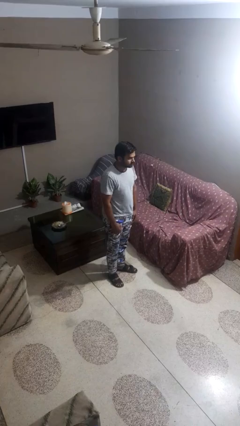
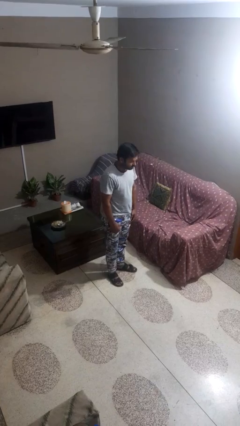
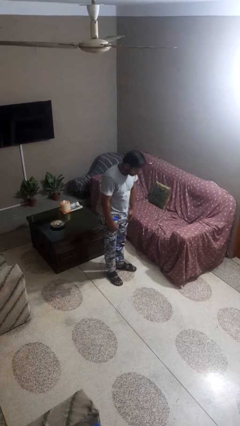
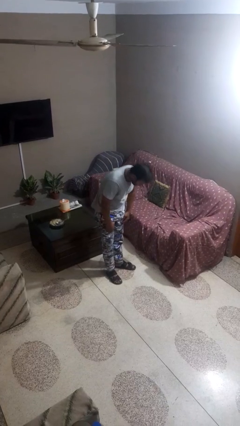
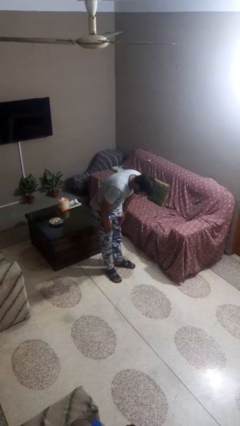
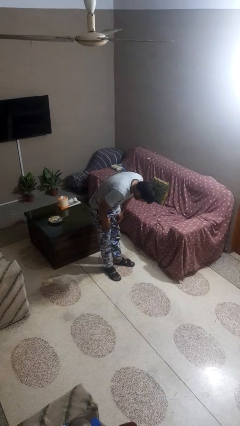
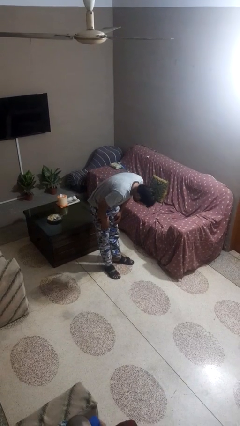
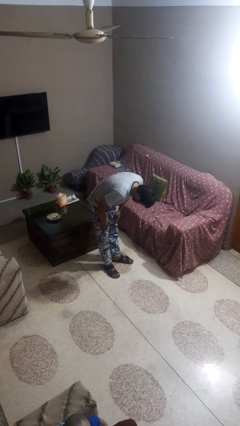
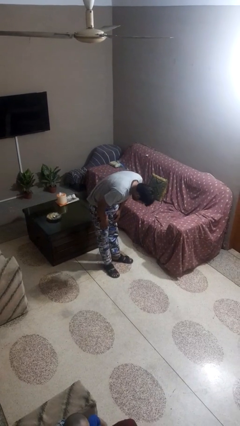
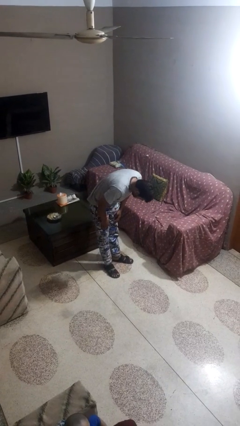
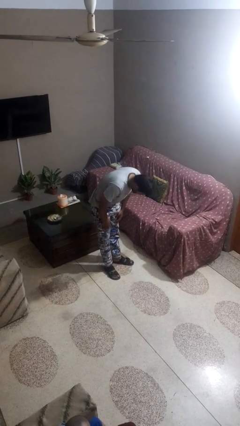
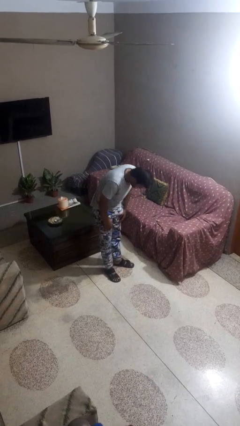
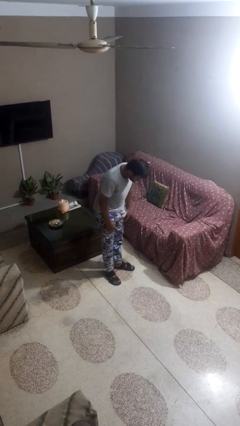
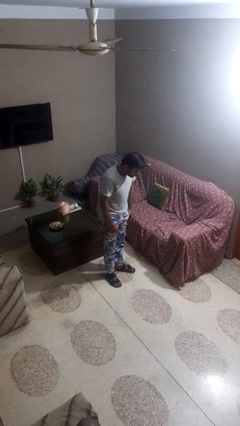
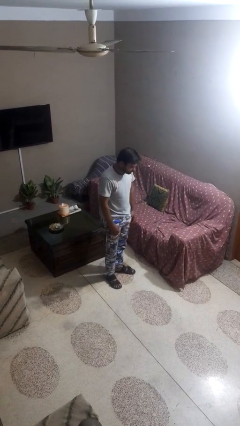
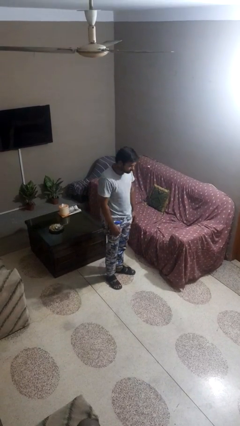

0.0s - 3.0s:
person bows

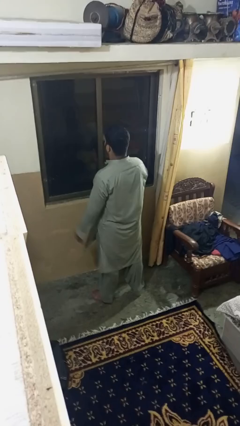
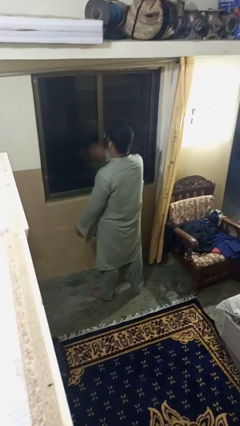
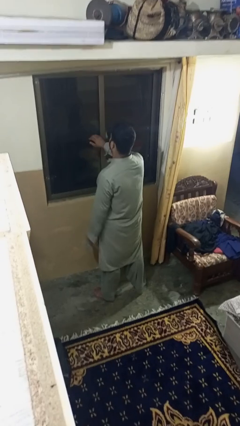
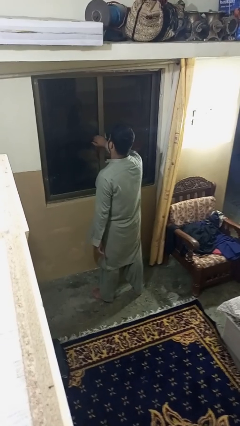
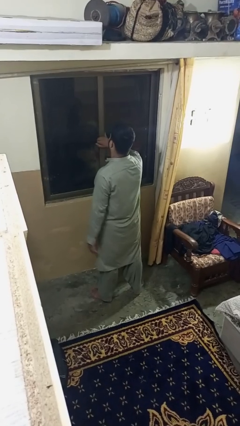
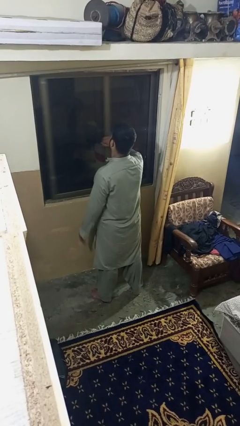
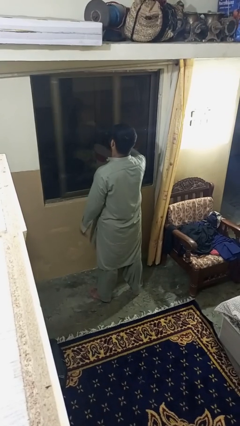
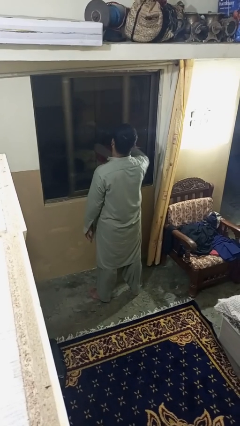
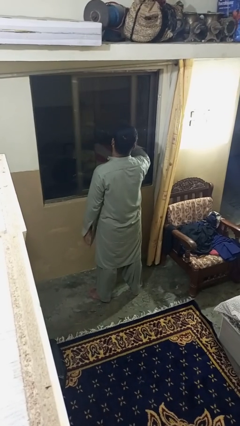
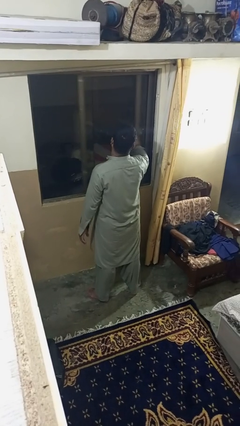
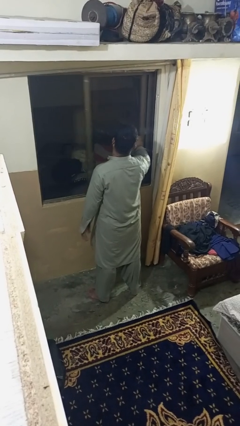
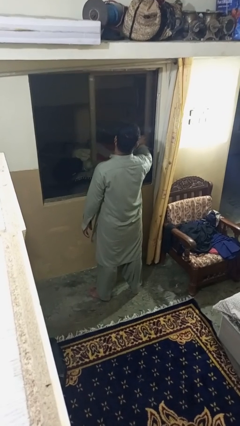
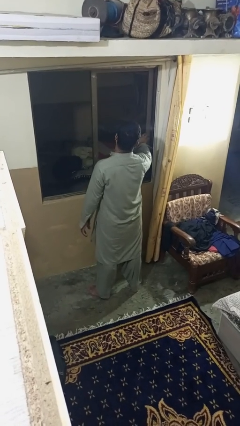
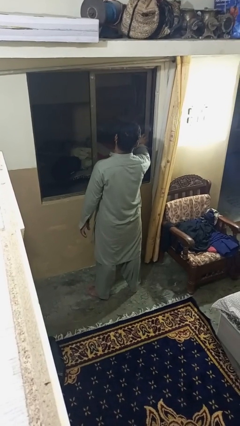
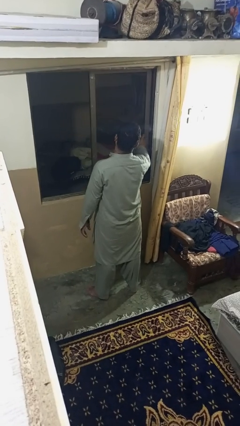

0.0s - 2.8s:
person opens home window

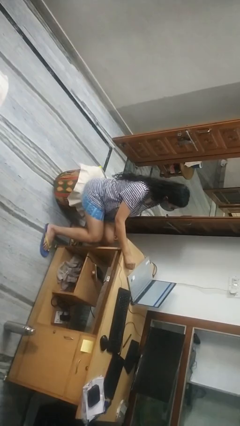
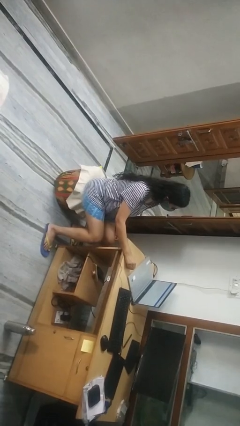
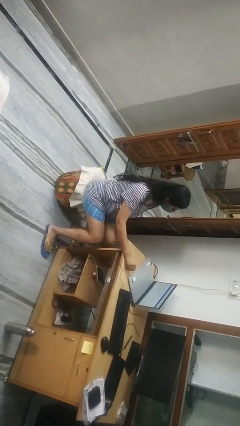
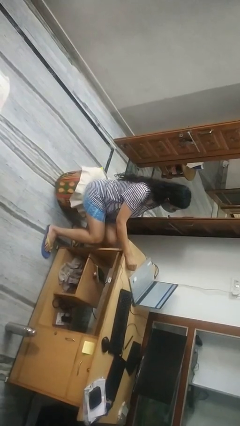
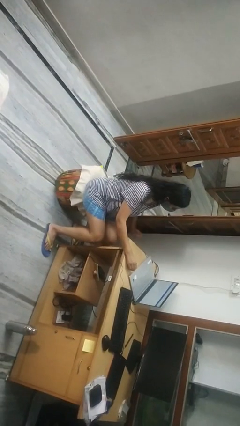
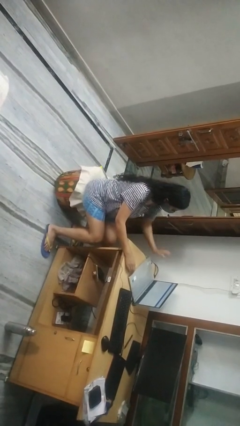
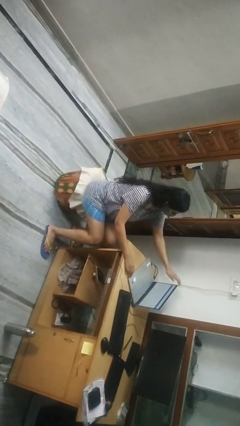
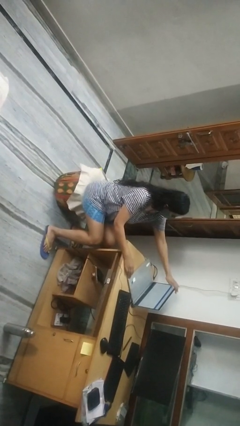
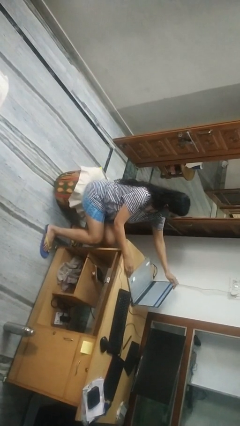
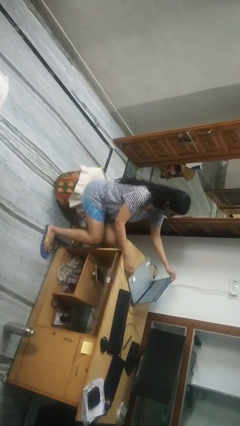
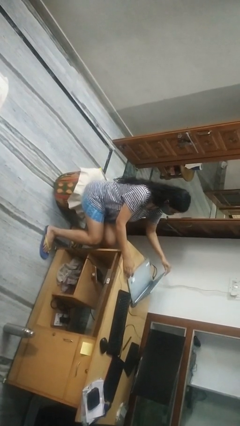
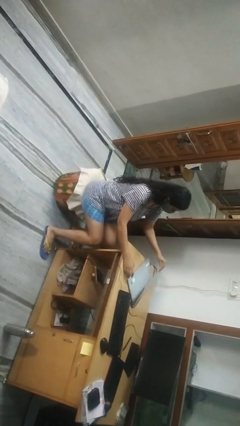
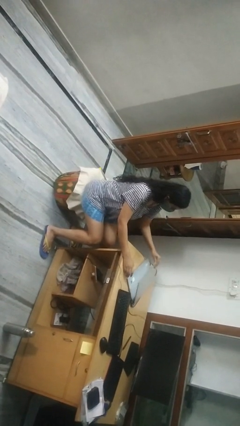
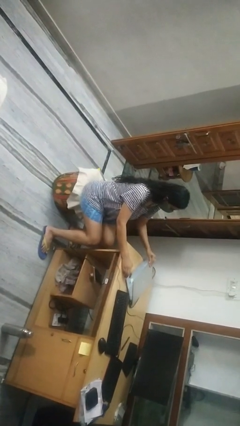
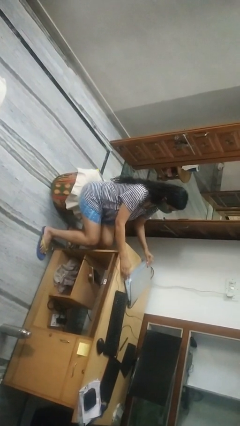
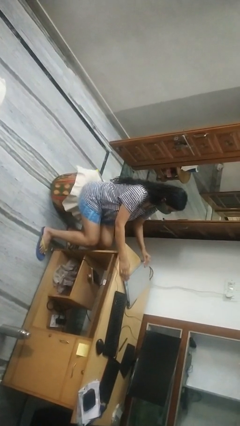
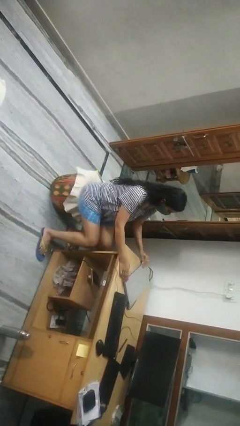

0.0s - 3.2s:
person closes laptop

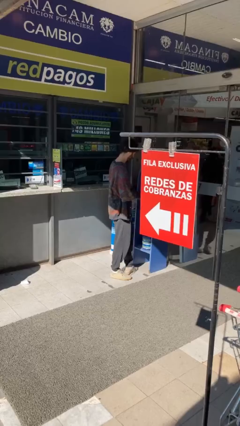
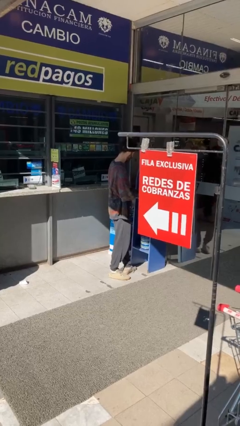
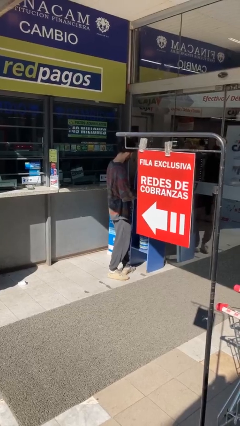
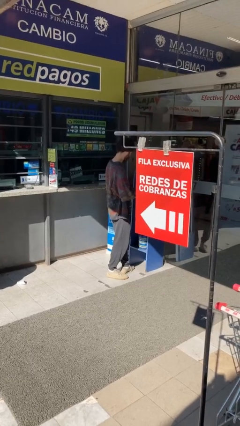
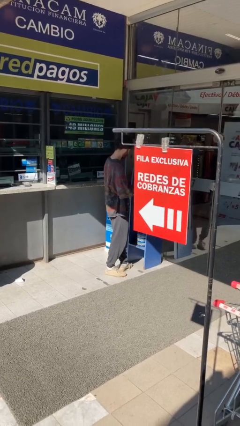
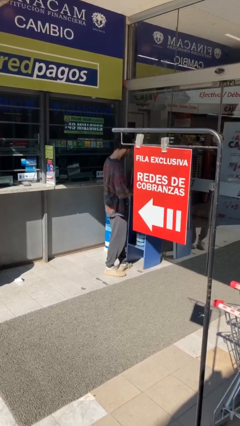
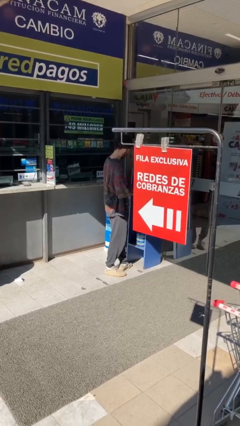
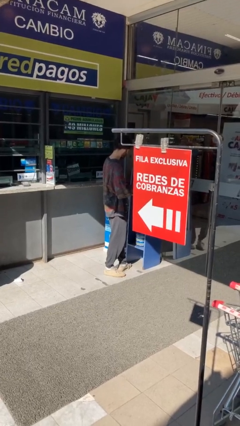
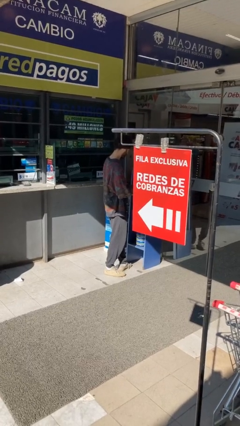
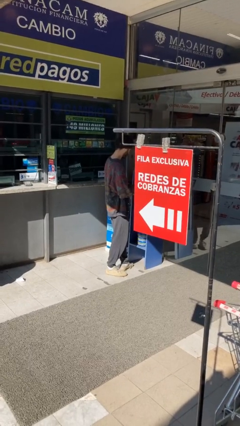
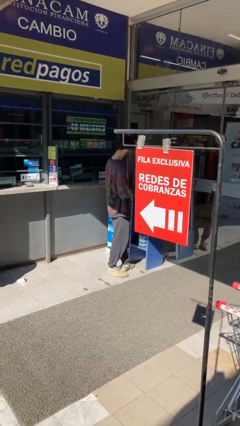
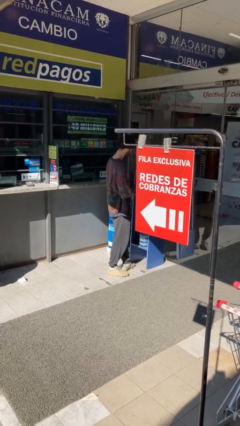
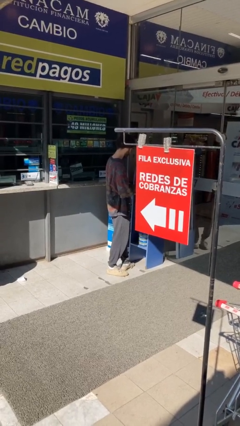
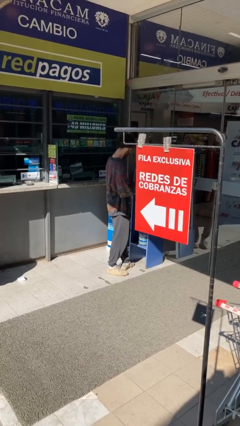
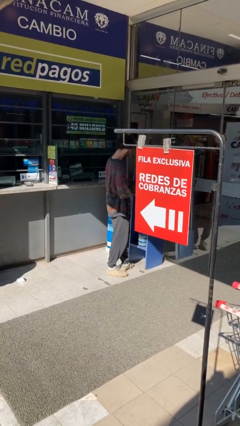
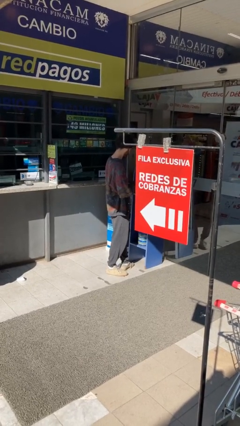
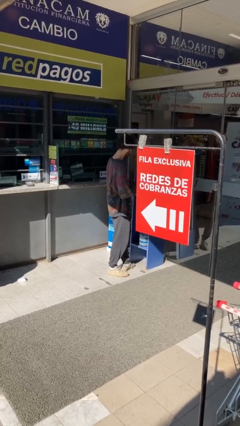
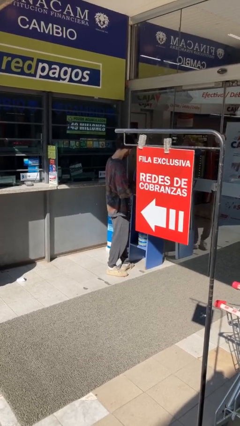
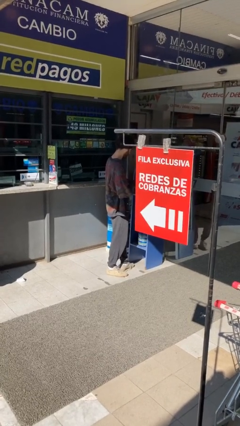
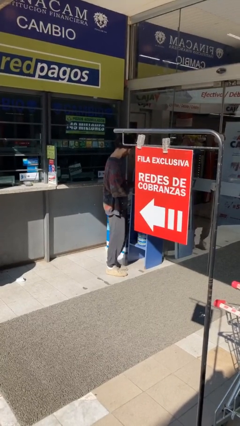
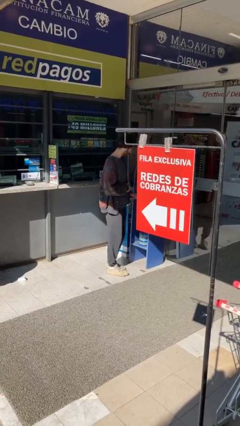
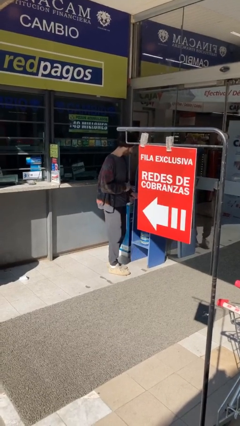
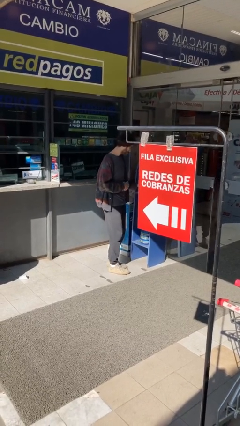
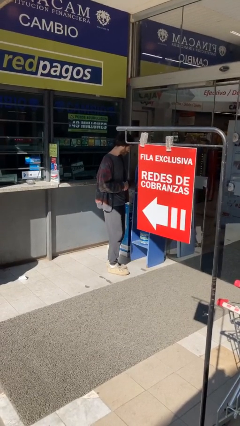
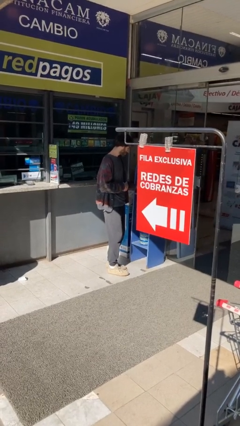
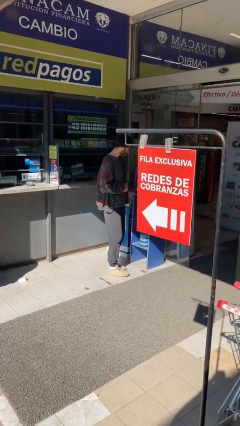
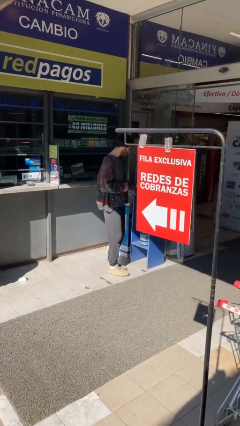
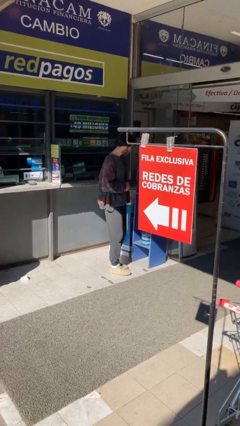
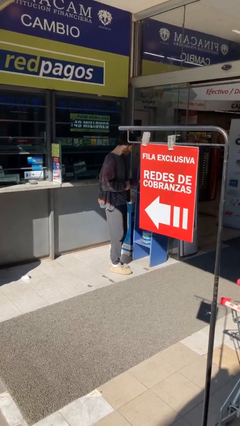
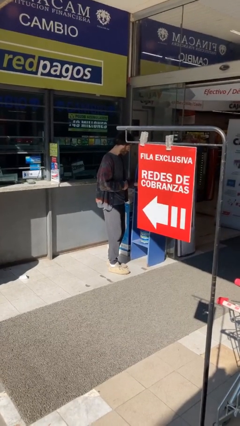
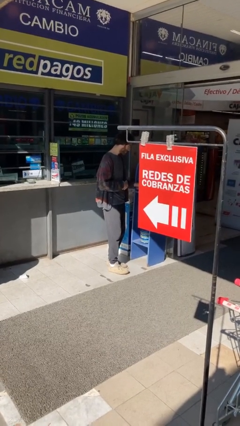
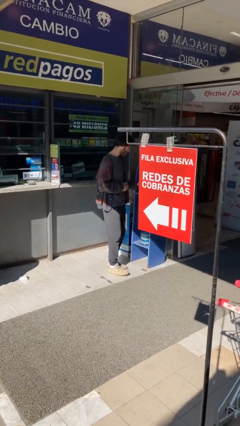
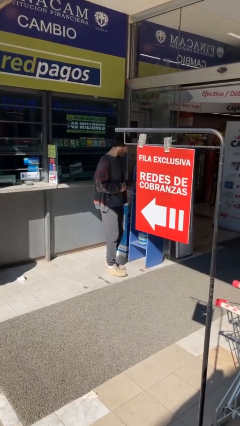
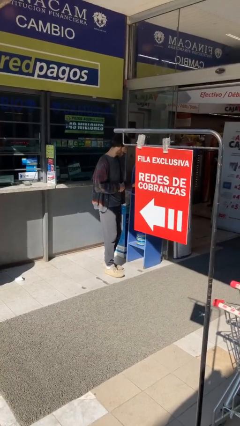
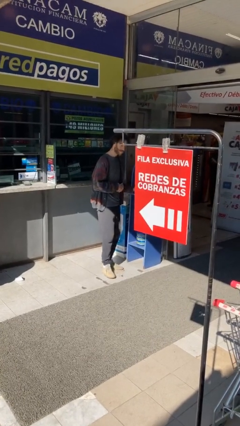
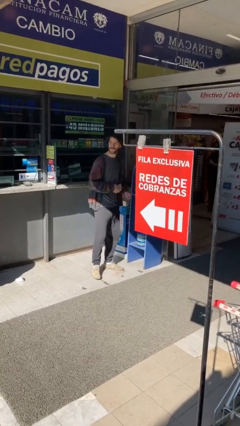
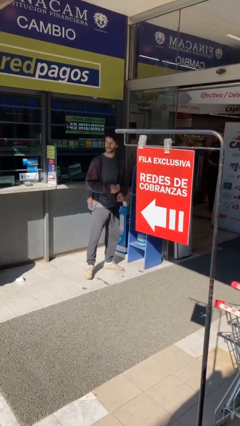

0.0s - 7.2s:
person purchases from machine

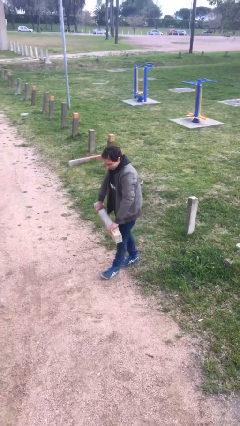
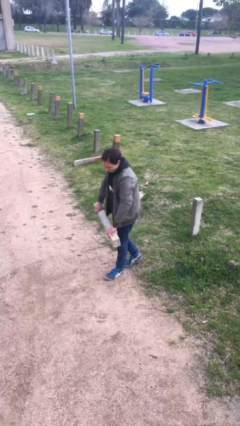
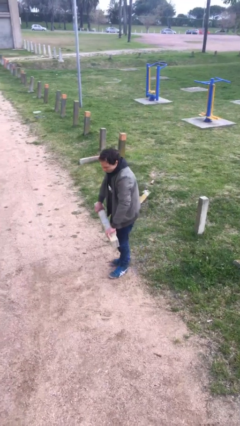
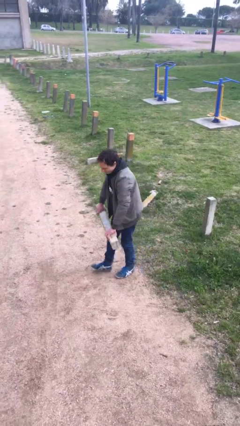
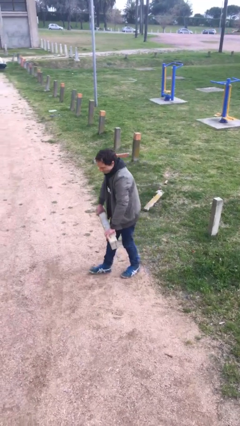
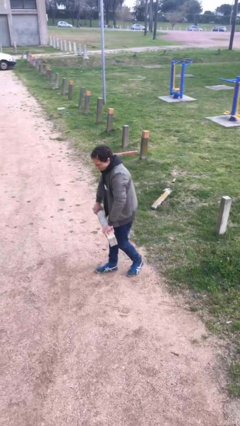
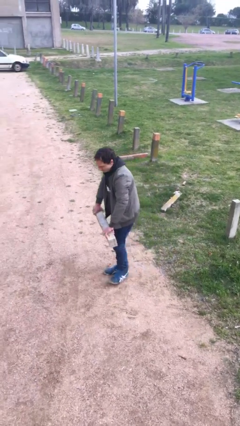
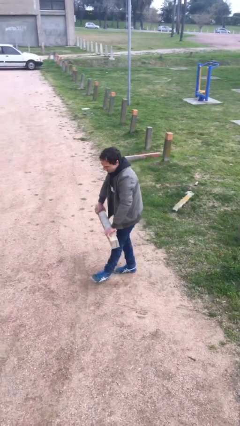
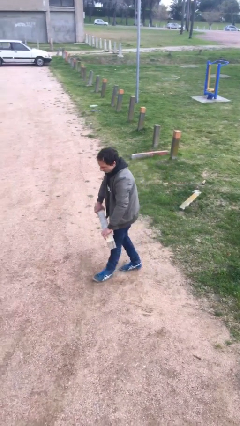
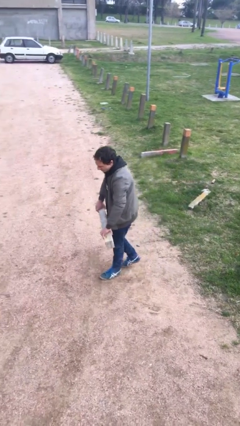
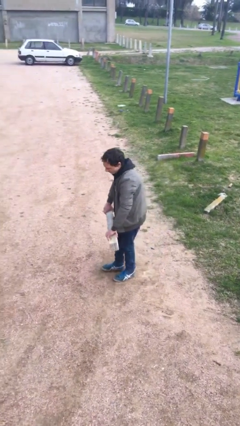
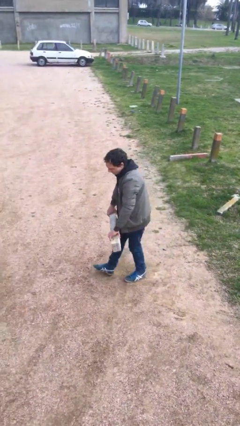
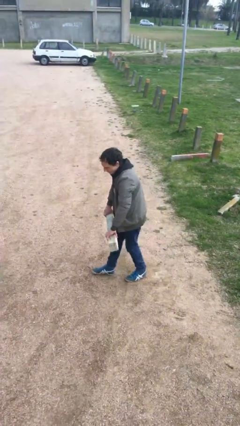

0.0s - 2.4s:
person carries heavy object
